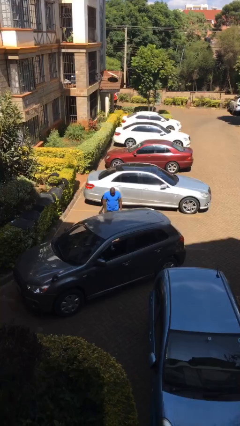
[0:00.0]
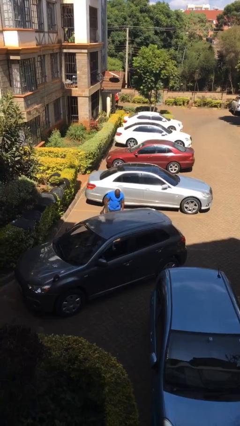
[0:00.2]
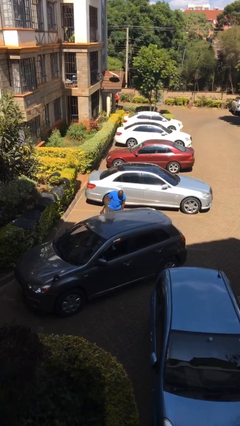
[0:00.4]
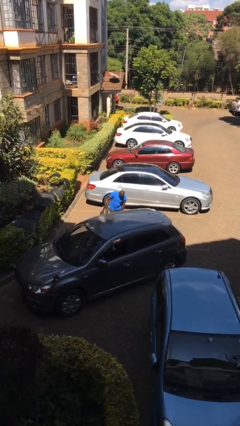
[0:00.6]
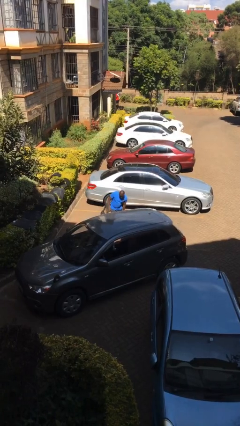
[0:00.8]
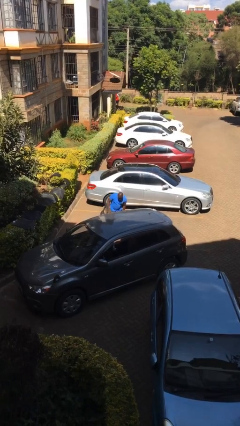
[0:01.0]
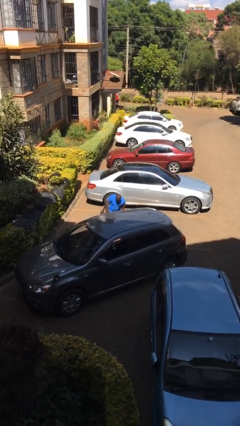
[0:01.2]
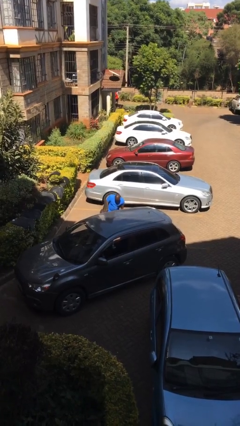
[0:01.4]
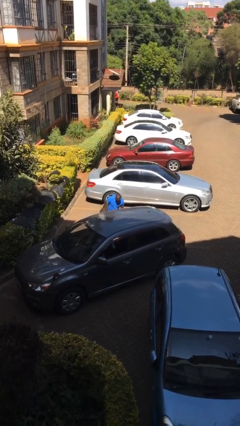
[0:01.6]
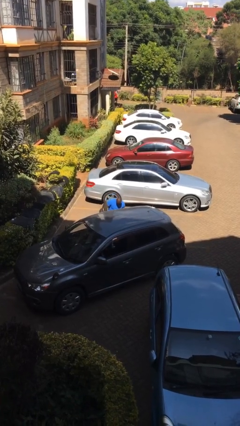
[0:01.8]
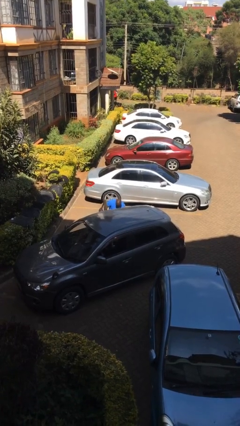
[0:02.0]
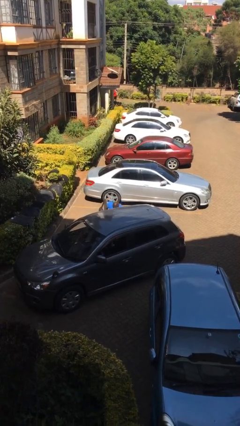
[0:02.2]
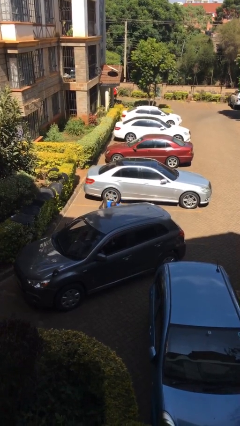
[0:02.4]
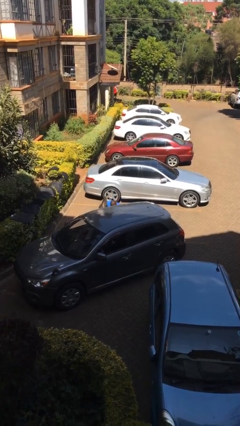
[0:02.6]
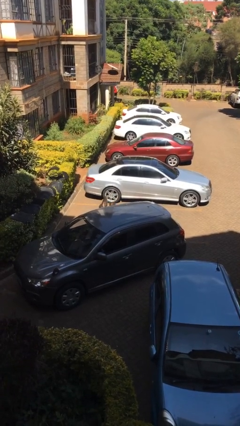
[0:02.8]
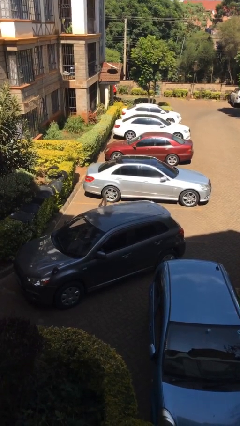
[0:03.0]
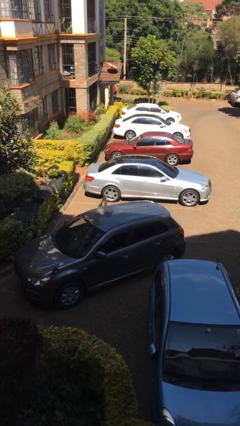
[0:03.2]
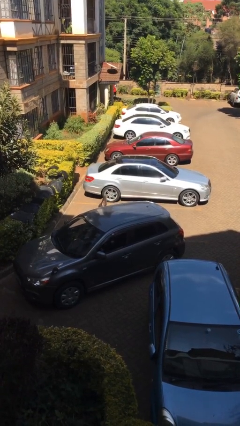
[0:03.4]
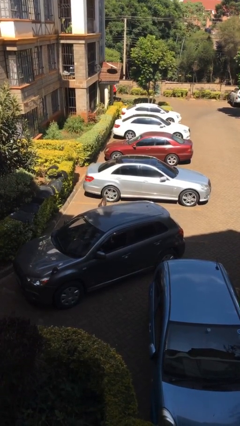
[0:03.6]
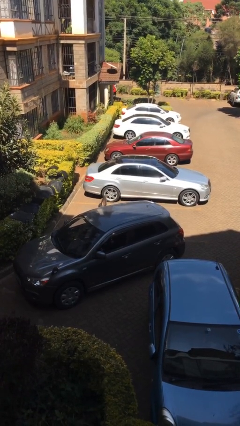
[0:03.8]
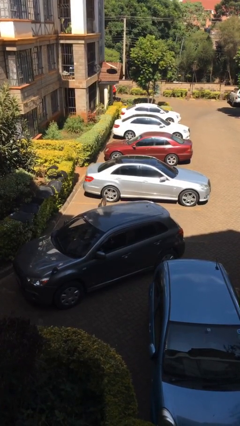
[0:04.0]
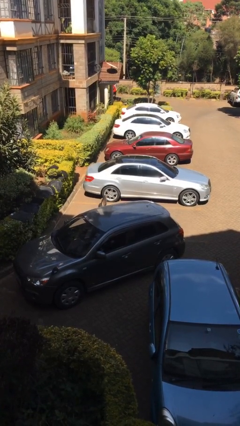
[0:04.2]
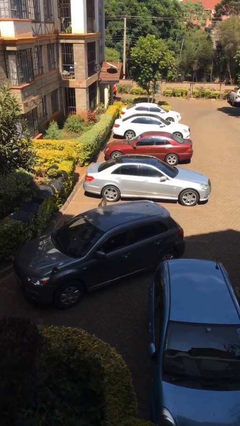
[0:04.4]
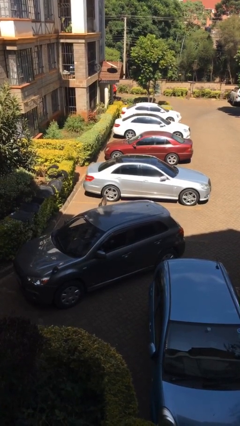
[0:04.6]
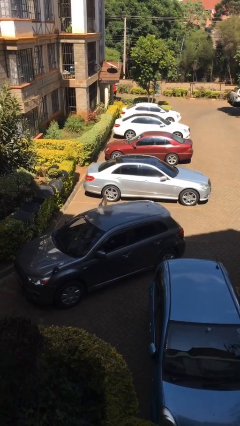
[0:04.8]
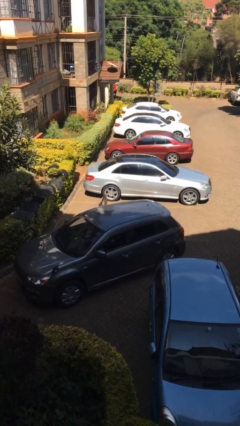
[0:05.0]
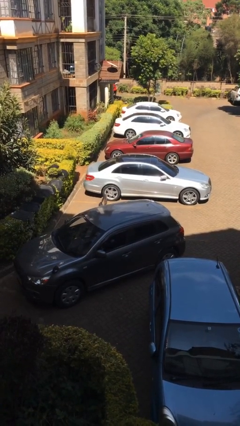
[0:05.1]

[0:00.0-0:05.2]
person enters car

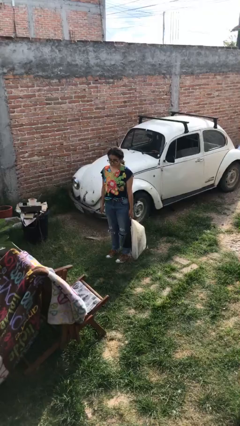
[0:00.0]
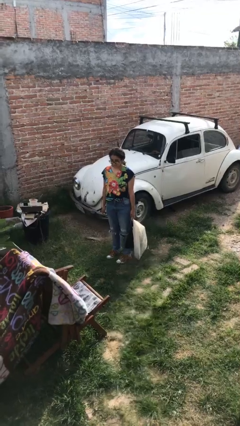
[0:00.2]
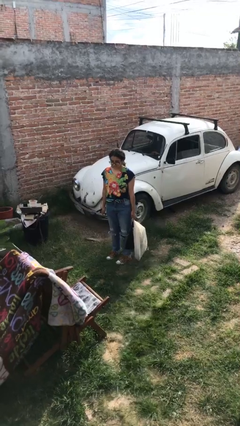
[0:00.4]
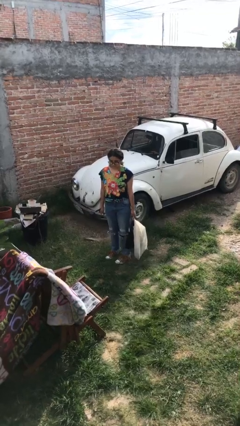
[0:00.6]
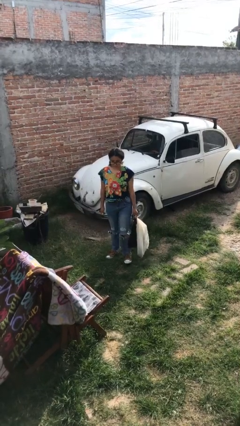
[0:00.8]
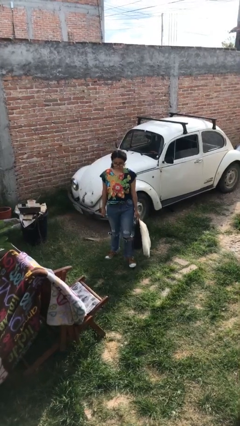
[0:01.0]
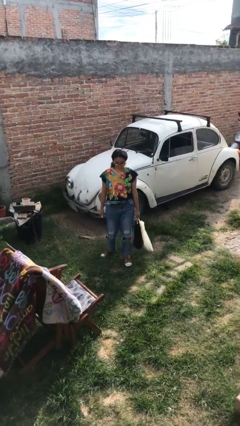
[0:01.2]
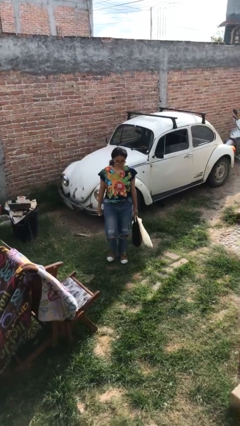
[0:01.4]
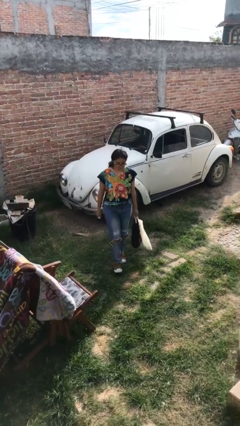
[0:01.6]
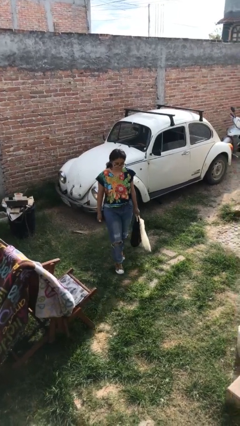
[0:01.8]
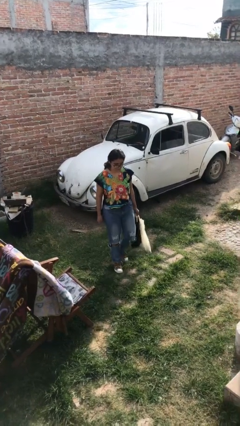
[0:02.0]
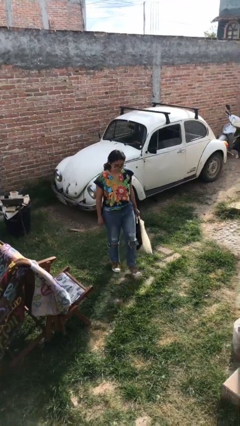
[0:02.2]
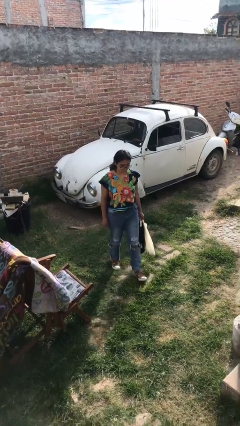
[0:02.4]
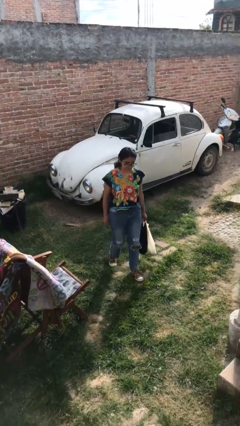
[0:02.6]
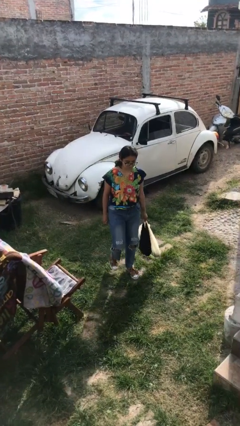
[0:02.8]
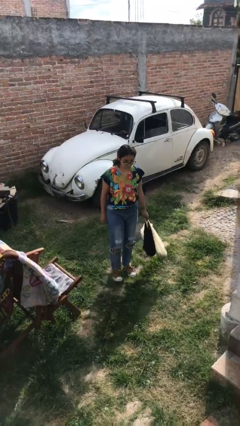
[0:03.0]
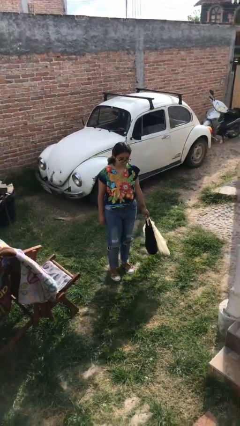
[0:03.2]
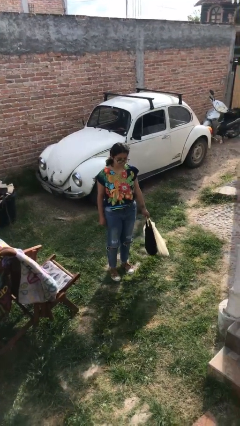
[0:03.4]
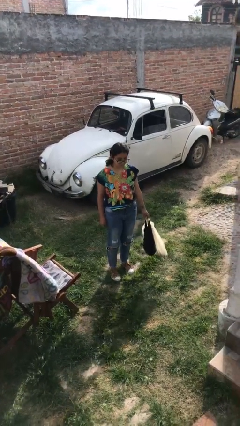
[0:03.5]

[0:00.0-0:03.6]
person carries groceries

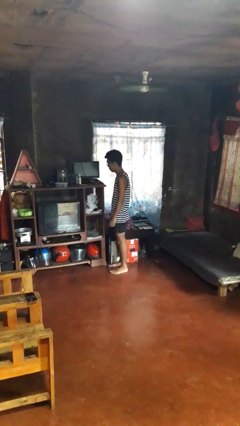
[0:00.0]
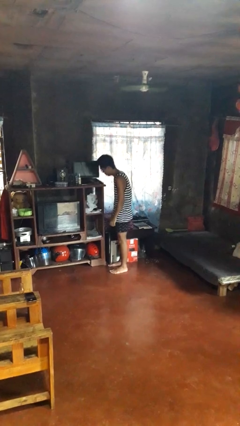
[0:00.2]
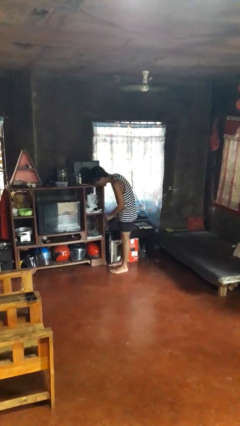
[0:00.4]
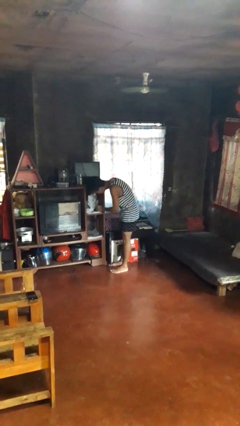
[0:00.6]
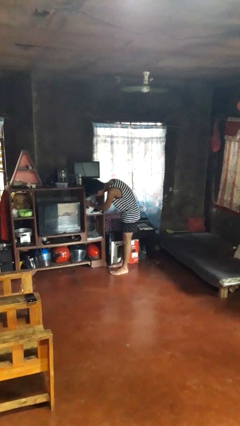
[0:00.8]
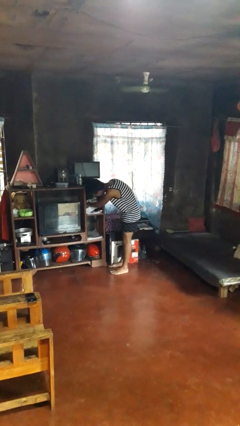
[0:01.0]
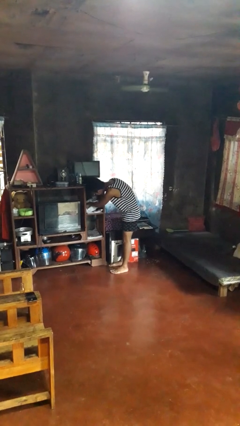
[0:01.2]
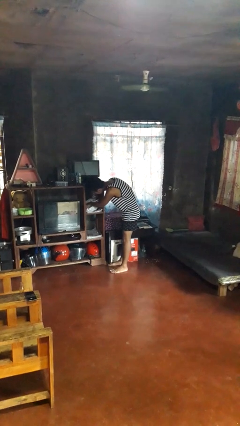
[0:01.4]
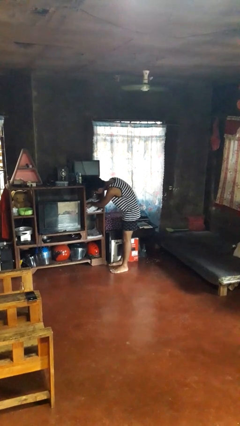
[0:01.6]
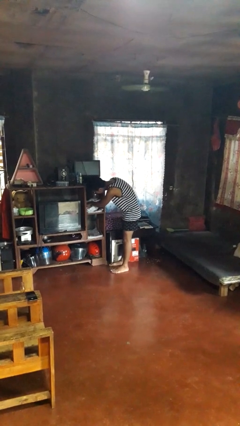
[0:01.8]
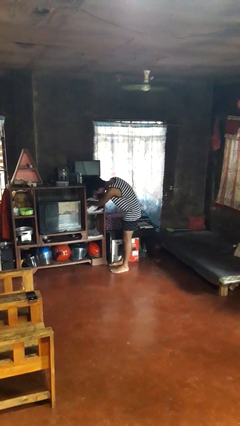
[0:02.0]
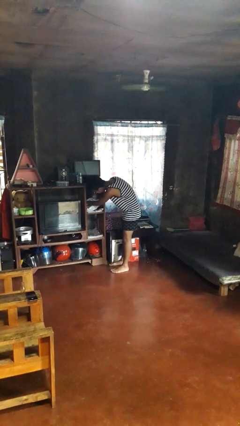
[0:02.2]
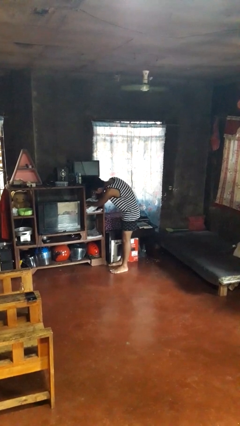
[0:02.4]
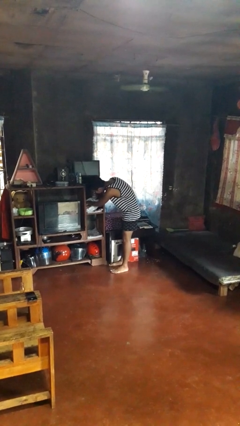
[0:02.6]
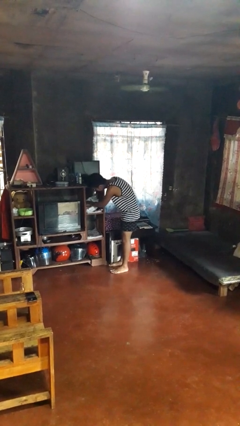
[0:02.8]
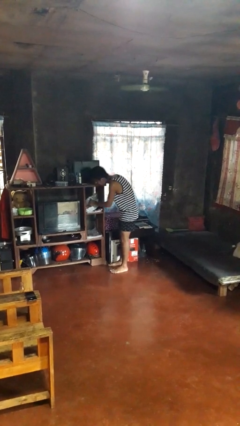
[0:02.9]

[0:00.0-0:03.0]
person searches in cabinet

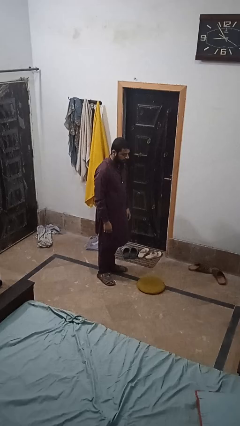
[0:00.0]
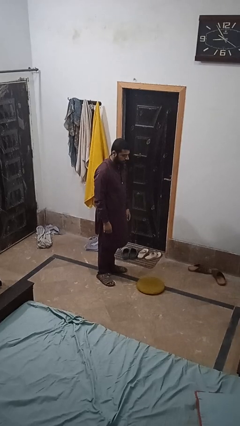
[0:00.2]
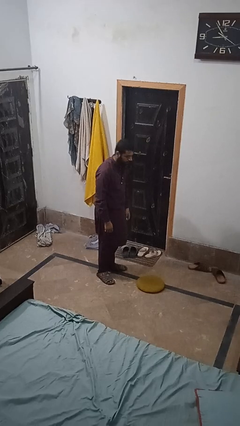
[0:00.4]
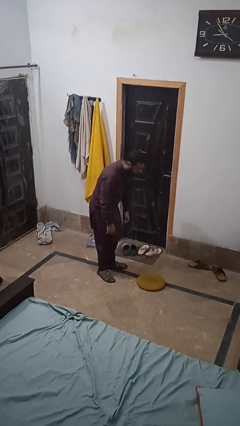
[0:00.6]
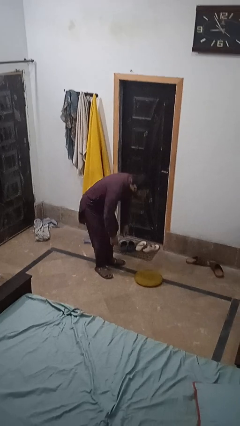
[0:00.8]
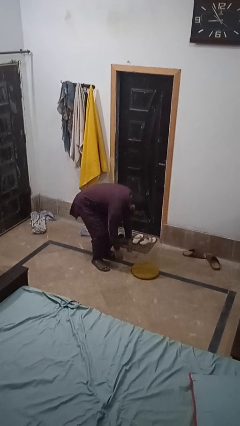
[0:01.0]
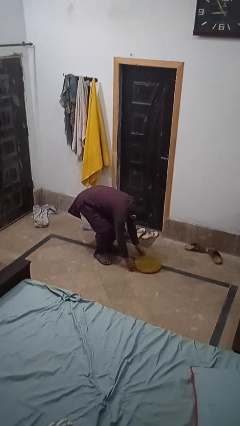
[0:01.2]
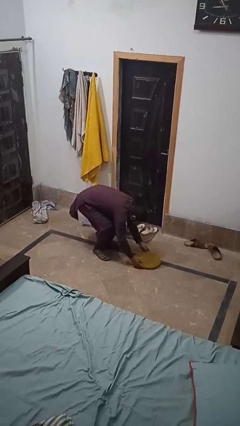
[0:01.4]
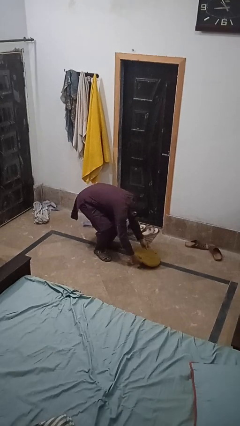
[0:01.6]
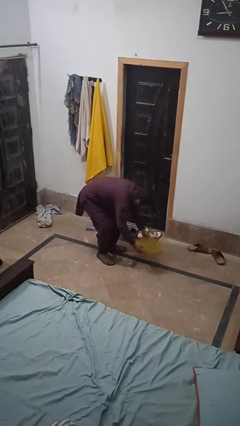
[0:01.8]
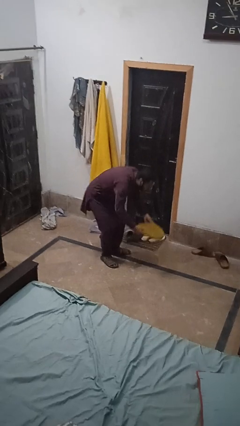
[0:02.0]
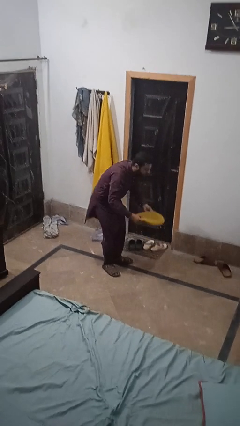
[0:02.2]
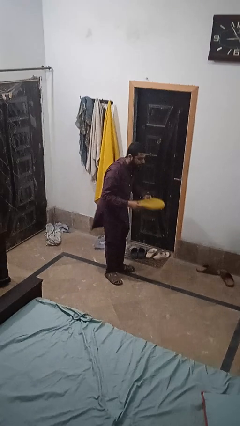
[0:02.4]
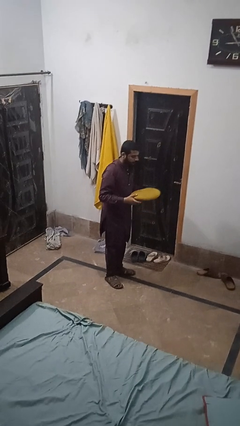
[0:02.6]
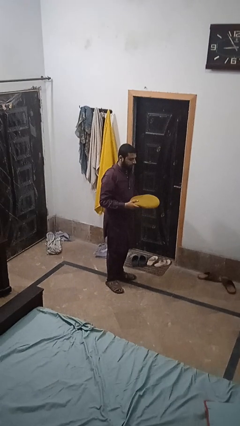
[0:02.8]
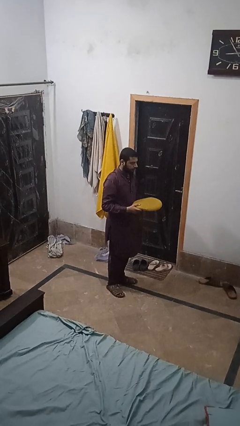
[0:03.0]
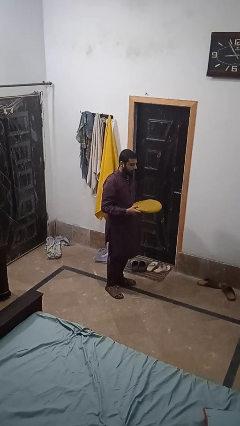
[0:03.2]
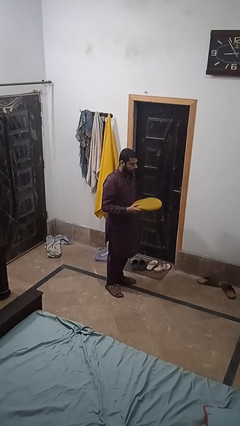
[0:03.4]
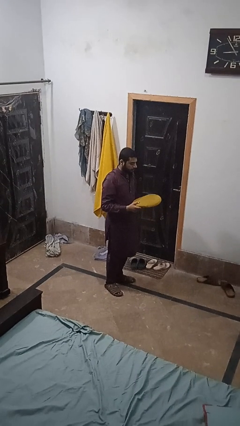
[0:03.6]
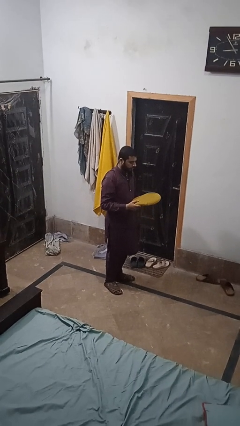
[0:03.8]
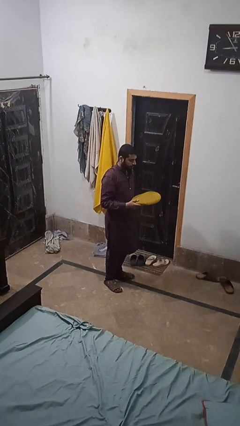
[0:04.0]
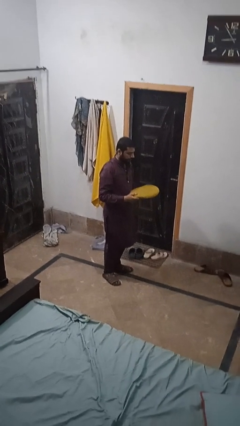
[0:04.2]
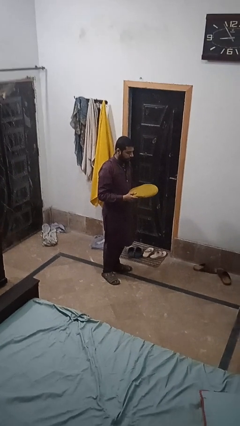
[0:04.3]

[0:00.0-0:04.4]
person picks up object from floor

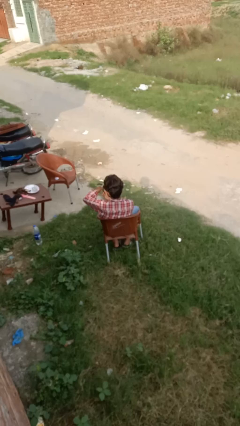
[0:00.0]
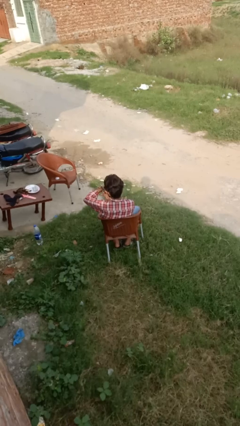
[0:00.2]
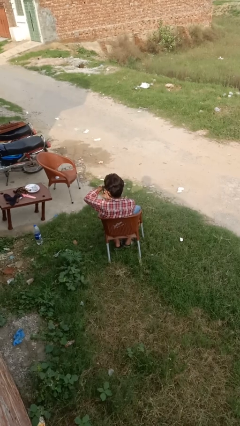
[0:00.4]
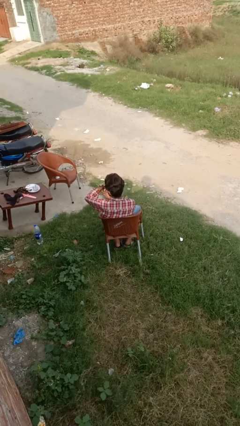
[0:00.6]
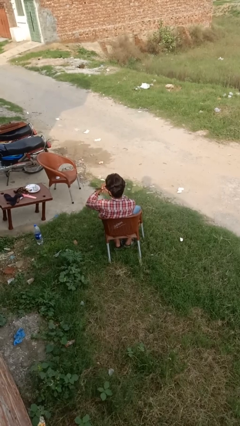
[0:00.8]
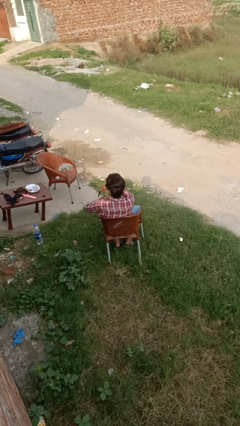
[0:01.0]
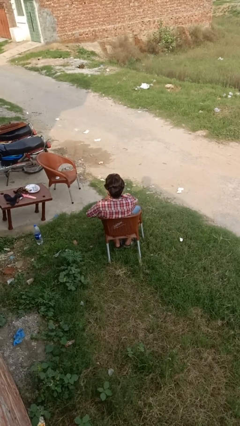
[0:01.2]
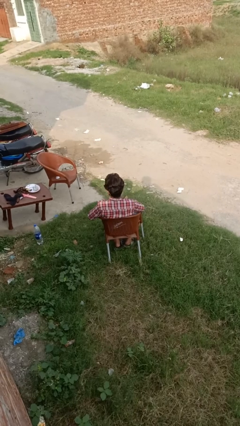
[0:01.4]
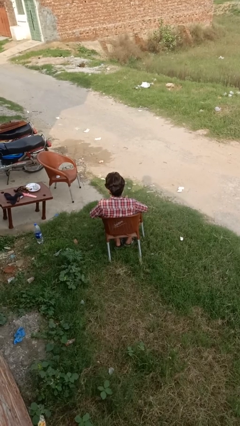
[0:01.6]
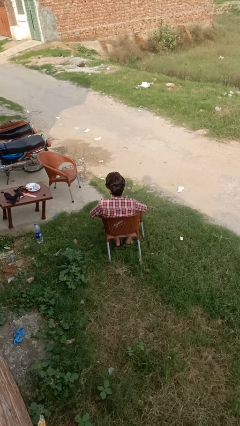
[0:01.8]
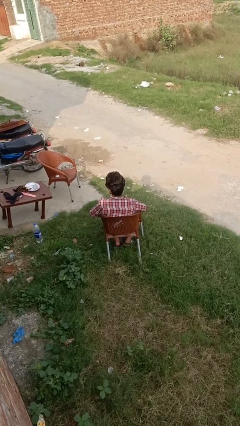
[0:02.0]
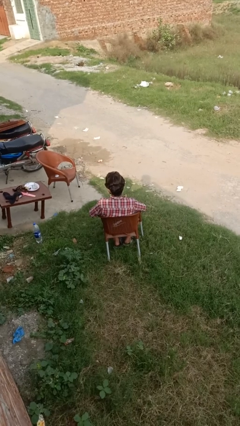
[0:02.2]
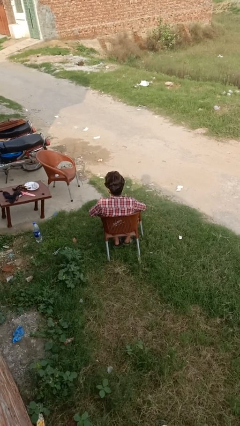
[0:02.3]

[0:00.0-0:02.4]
person takes off wristwatch
